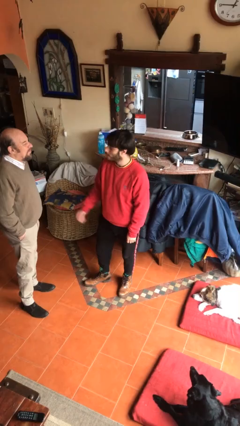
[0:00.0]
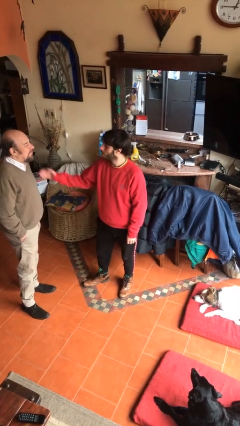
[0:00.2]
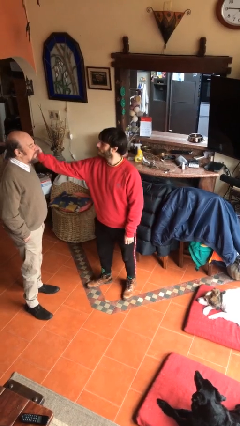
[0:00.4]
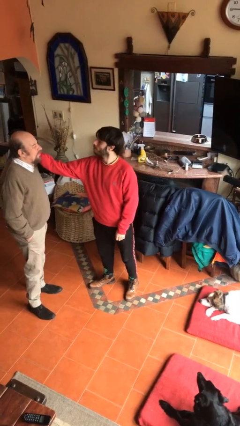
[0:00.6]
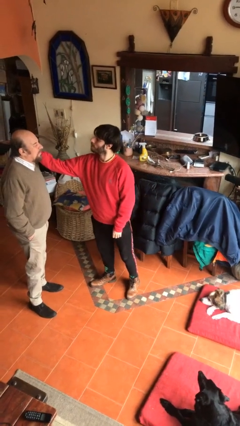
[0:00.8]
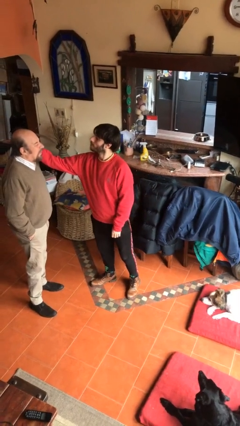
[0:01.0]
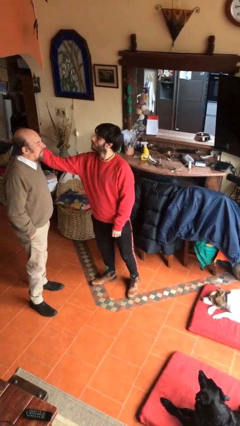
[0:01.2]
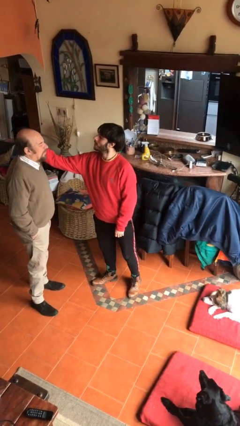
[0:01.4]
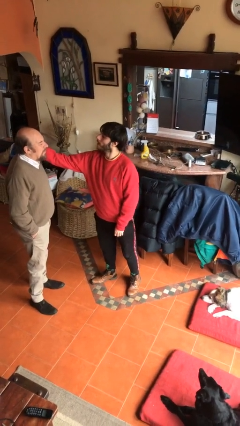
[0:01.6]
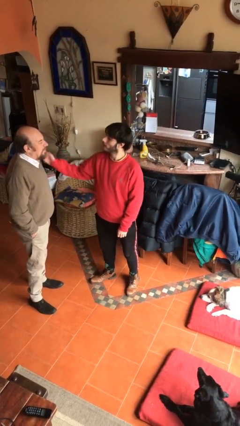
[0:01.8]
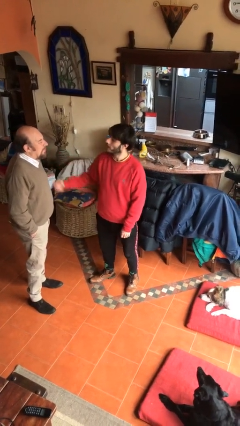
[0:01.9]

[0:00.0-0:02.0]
person touches face of person

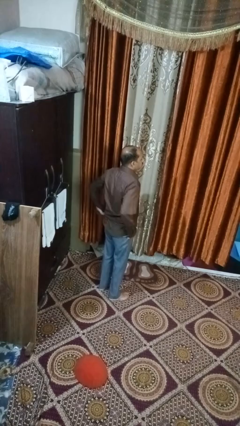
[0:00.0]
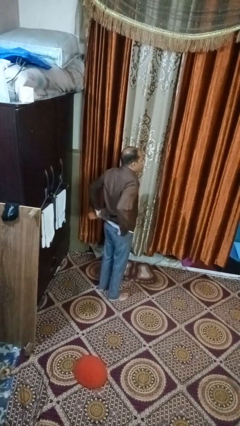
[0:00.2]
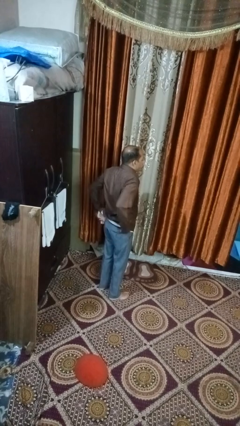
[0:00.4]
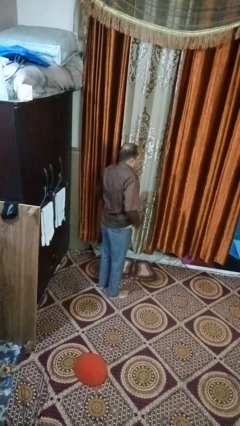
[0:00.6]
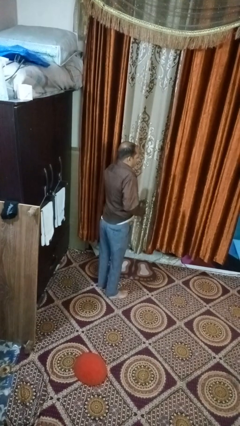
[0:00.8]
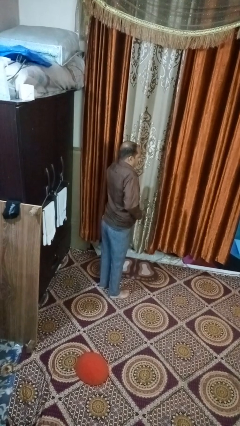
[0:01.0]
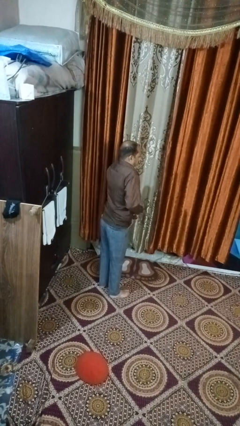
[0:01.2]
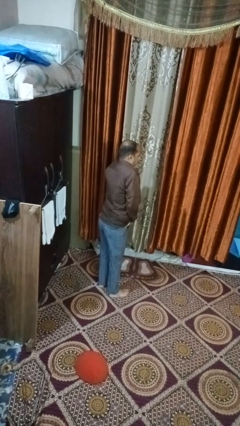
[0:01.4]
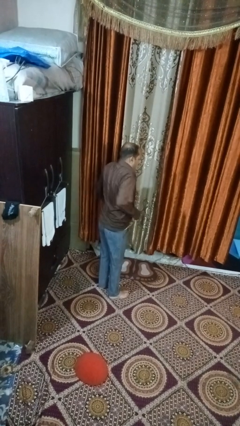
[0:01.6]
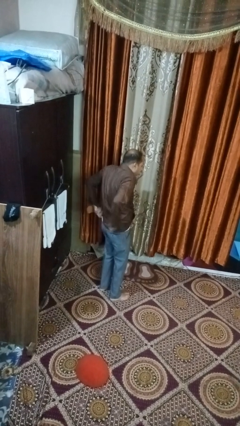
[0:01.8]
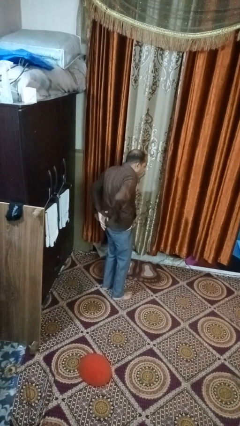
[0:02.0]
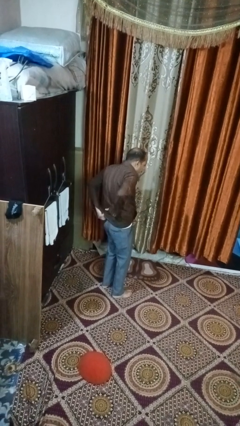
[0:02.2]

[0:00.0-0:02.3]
person tucks in shirt

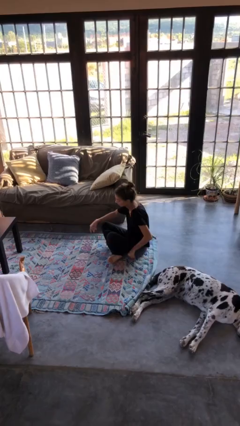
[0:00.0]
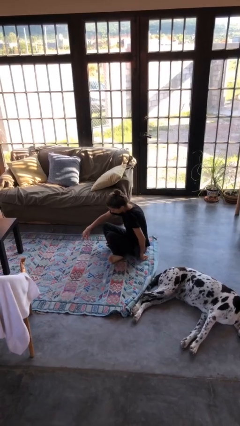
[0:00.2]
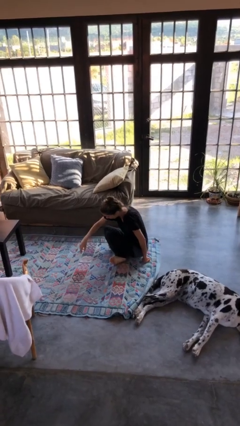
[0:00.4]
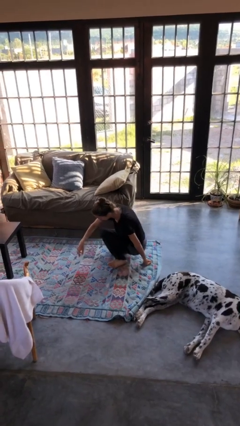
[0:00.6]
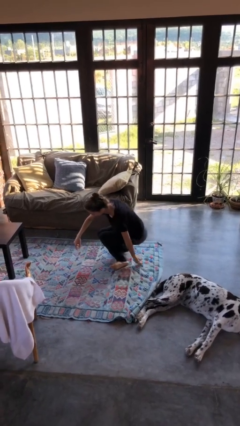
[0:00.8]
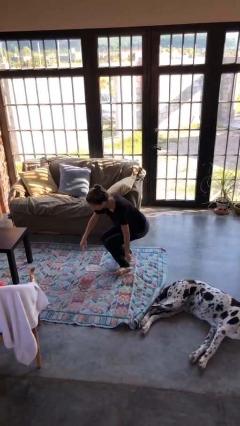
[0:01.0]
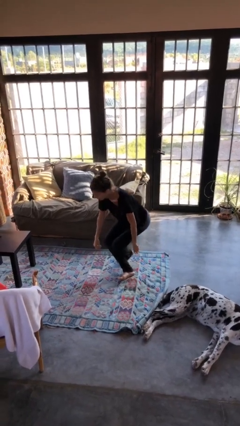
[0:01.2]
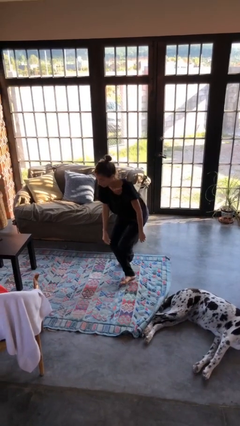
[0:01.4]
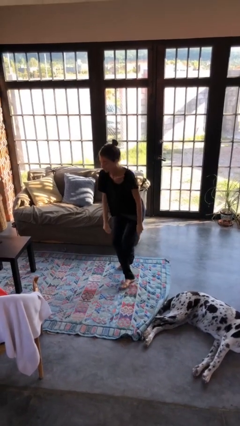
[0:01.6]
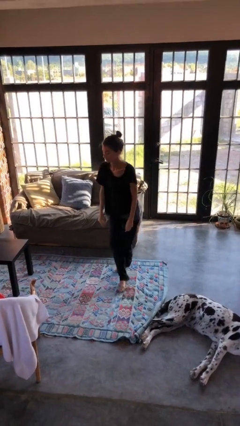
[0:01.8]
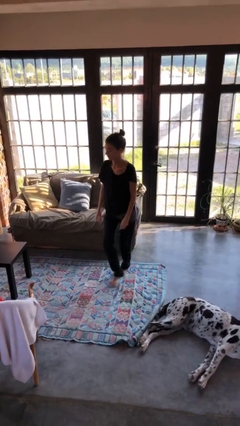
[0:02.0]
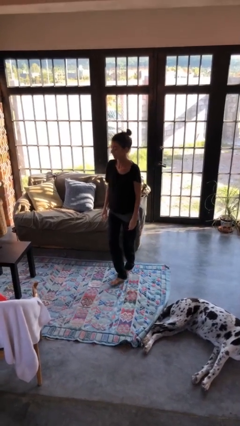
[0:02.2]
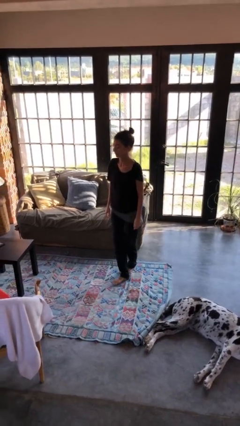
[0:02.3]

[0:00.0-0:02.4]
person stands up from floor

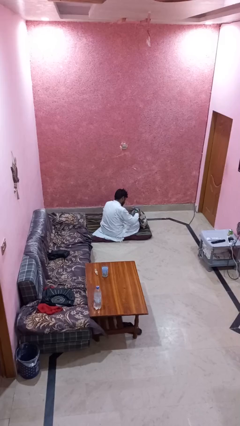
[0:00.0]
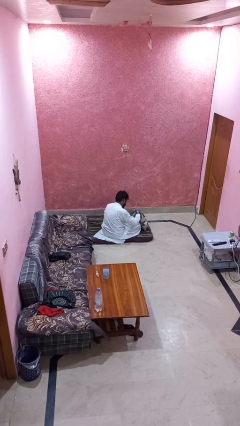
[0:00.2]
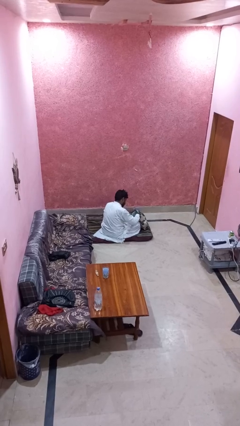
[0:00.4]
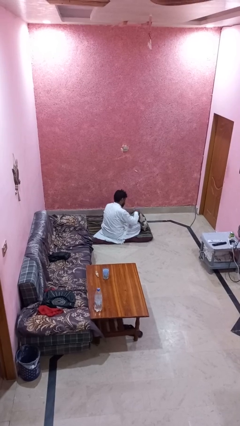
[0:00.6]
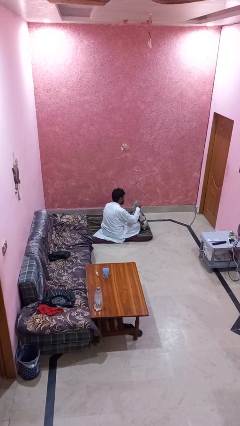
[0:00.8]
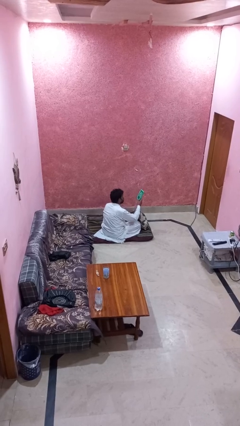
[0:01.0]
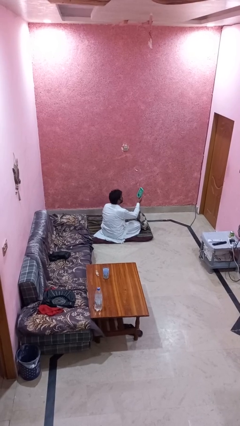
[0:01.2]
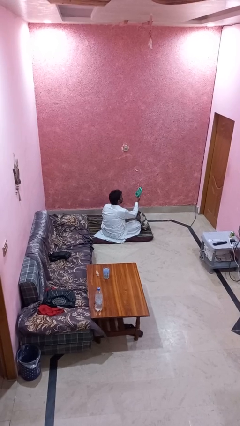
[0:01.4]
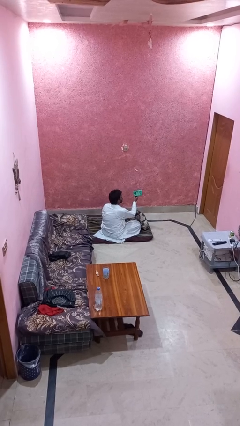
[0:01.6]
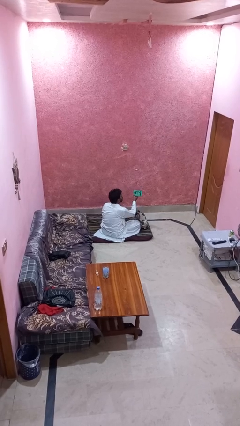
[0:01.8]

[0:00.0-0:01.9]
person takes object from backpack

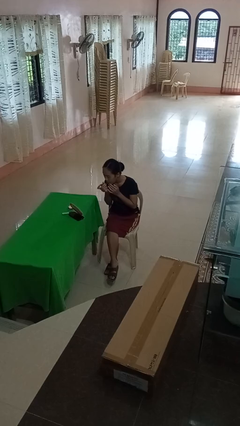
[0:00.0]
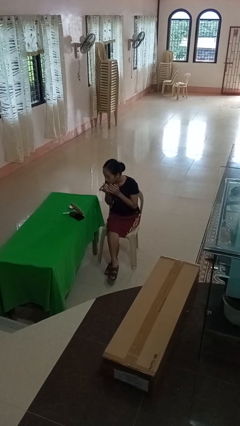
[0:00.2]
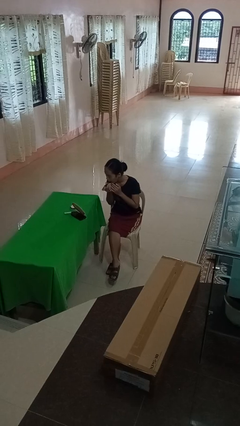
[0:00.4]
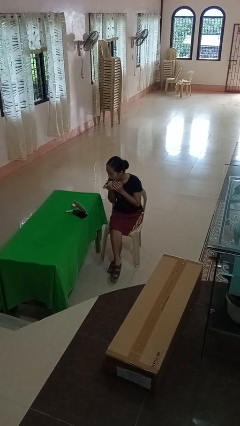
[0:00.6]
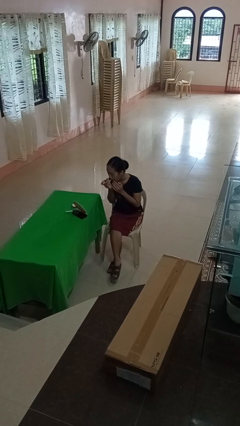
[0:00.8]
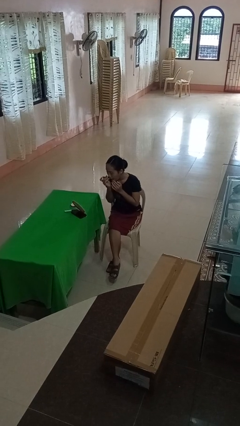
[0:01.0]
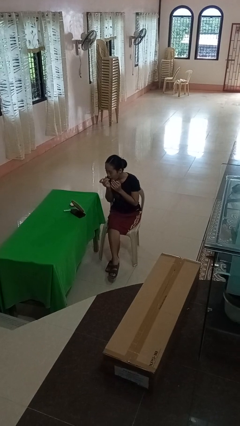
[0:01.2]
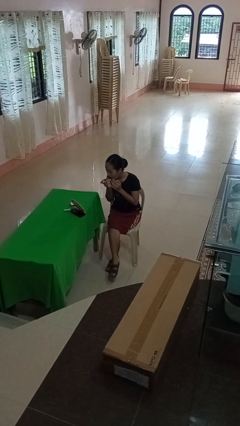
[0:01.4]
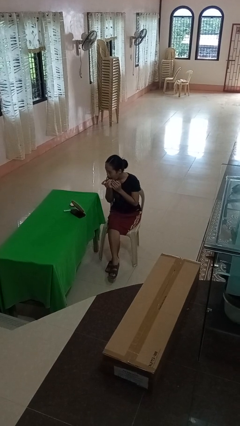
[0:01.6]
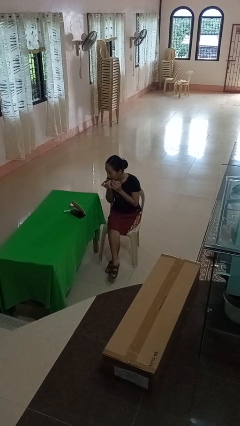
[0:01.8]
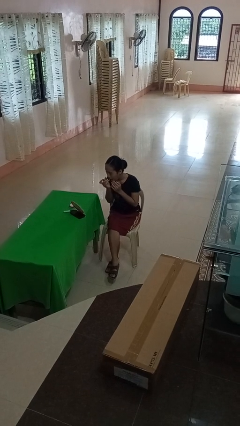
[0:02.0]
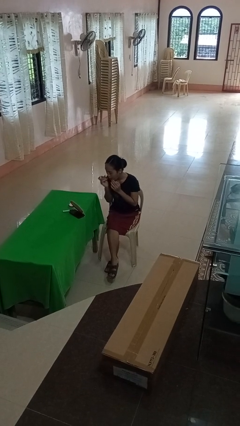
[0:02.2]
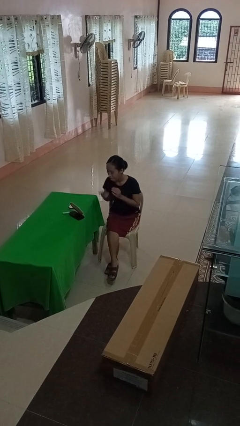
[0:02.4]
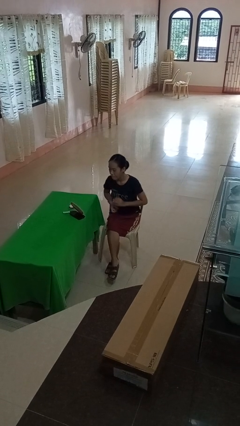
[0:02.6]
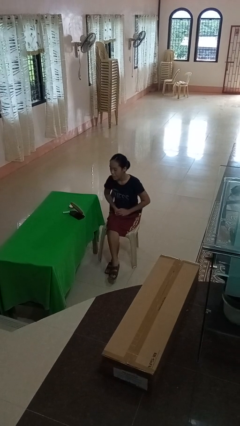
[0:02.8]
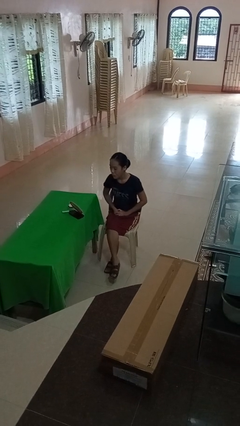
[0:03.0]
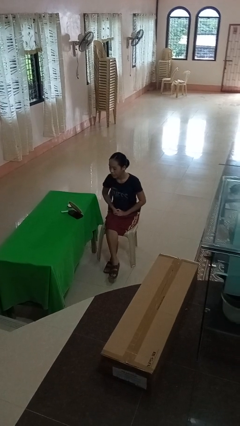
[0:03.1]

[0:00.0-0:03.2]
person applies lip makeup

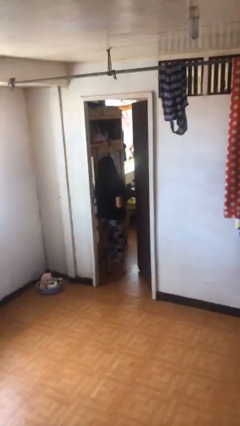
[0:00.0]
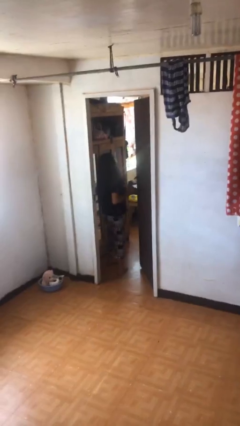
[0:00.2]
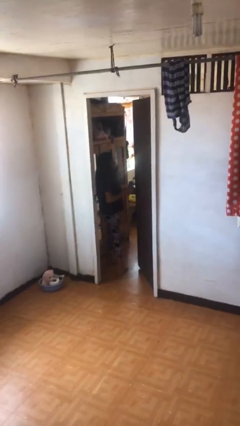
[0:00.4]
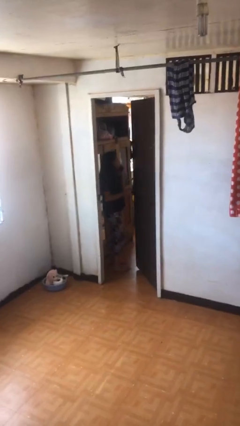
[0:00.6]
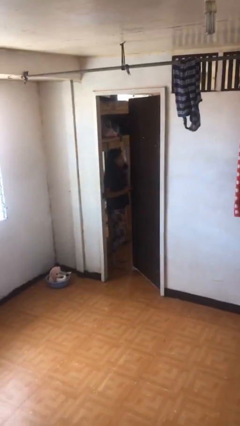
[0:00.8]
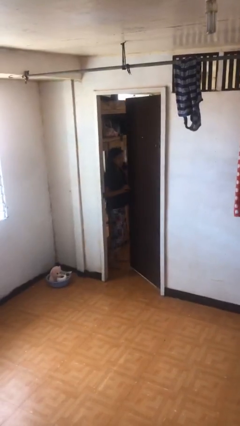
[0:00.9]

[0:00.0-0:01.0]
person exits scene through structure

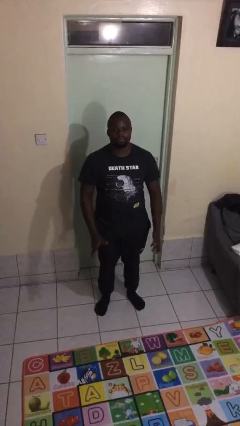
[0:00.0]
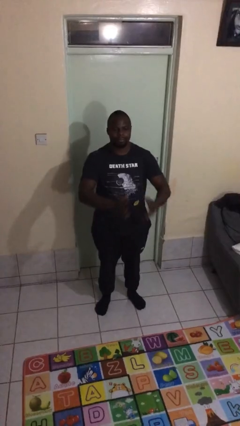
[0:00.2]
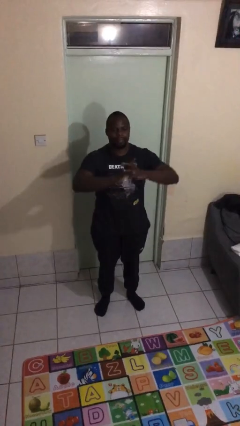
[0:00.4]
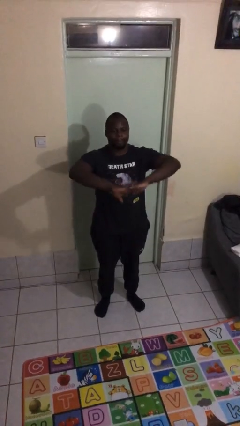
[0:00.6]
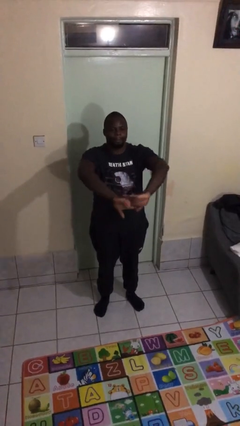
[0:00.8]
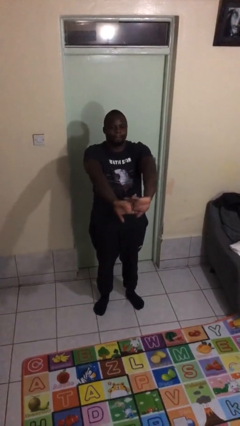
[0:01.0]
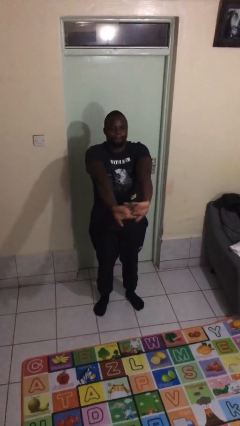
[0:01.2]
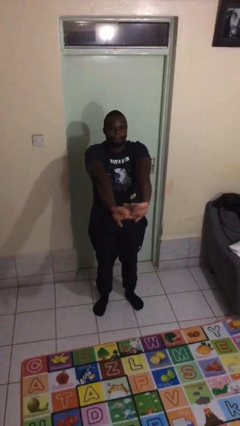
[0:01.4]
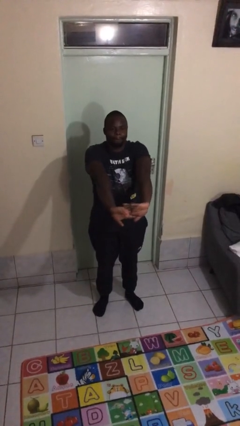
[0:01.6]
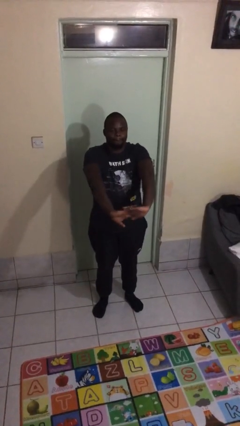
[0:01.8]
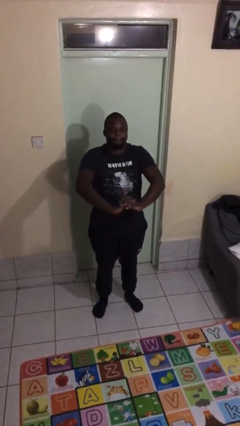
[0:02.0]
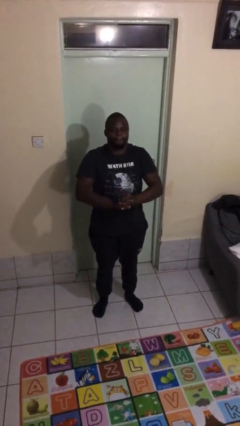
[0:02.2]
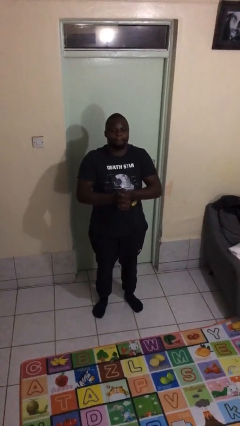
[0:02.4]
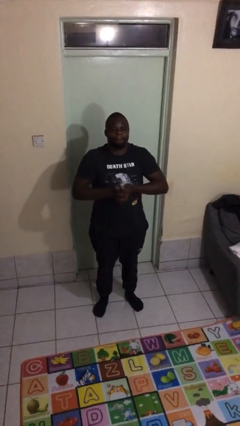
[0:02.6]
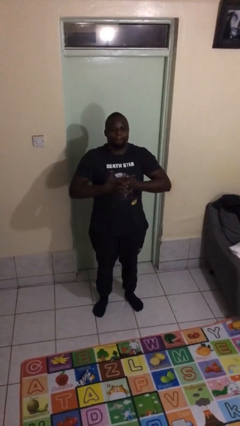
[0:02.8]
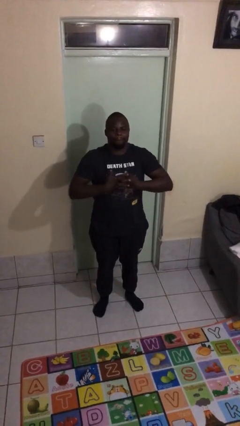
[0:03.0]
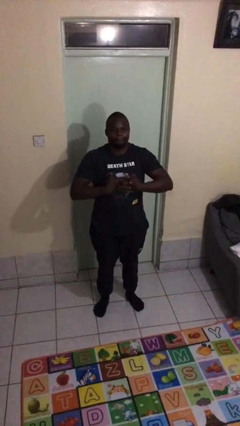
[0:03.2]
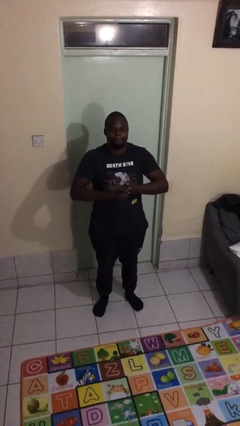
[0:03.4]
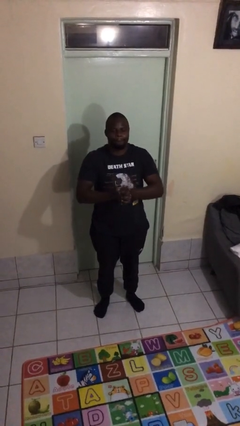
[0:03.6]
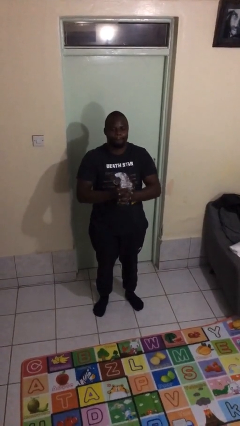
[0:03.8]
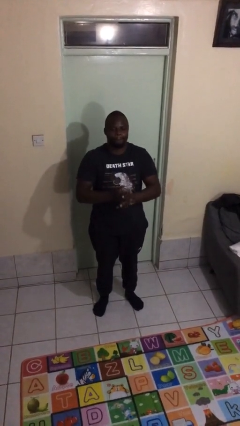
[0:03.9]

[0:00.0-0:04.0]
person cracks knuckles

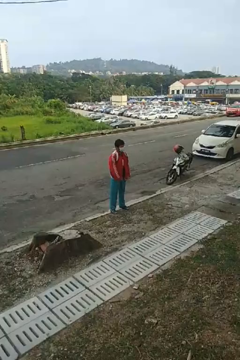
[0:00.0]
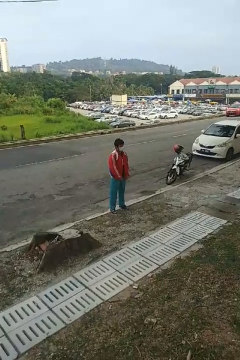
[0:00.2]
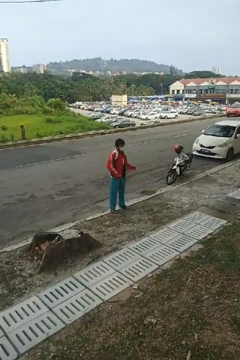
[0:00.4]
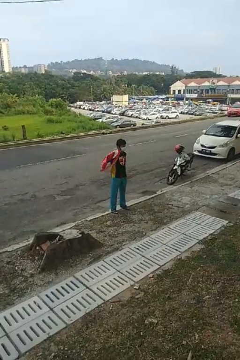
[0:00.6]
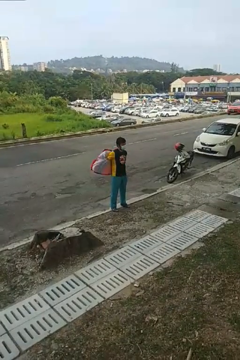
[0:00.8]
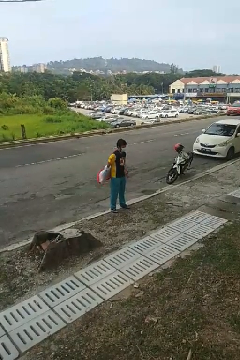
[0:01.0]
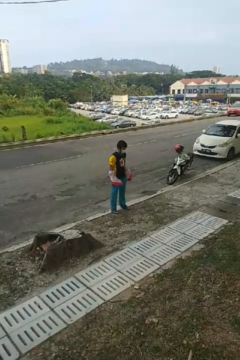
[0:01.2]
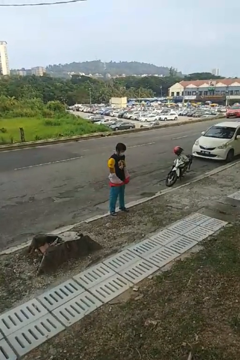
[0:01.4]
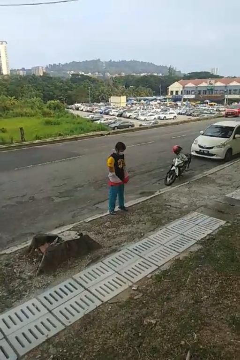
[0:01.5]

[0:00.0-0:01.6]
person takes off jacket
